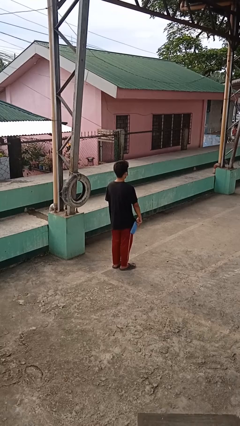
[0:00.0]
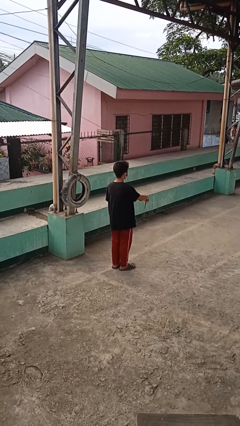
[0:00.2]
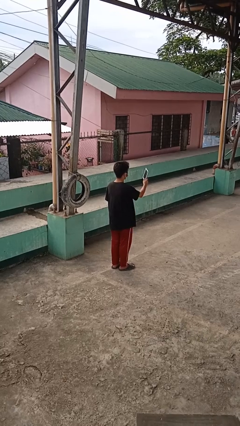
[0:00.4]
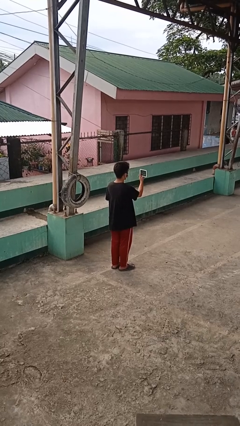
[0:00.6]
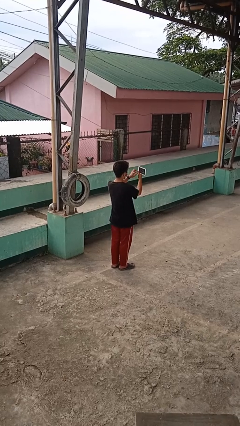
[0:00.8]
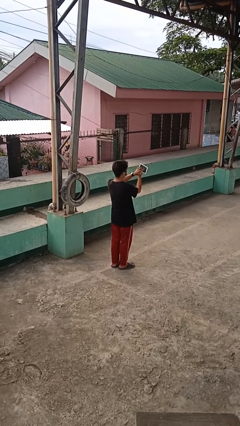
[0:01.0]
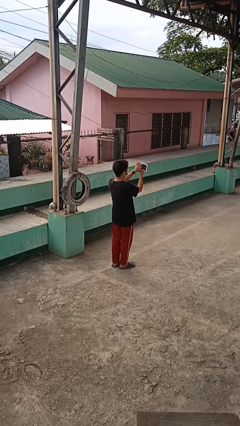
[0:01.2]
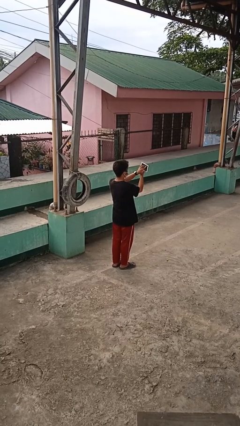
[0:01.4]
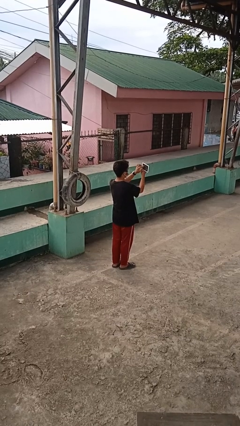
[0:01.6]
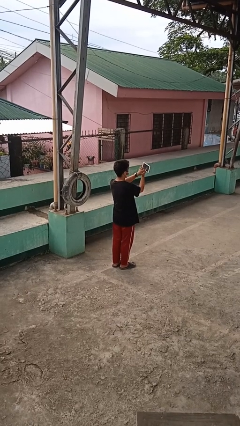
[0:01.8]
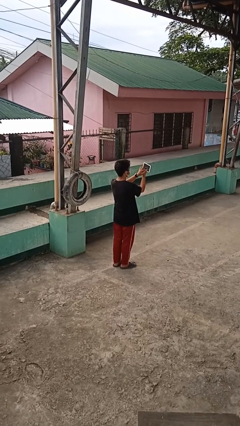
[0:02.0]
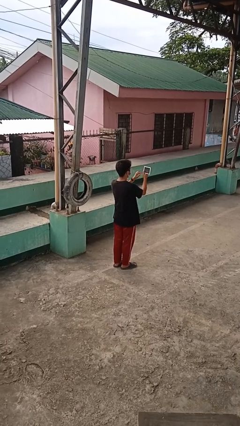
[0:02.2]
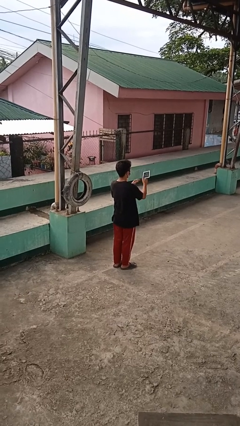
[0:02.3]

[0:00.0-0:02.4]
person interacts with tablet

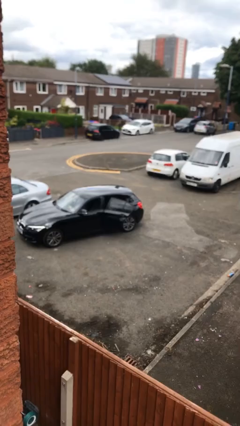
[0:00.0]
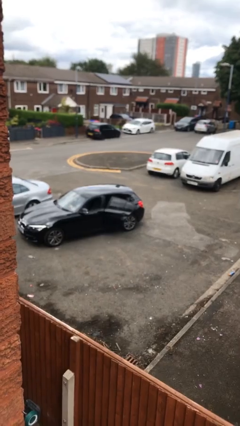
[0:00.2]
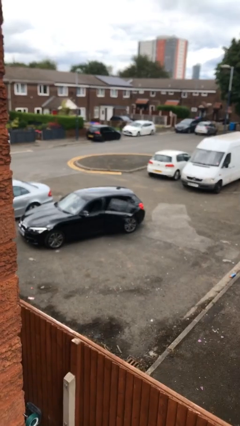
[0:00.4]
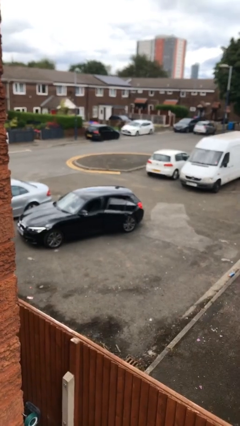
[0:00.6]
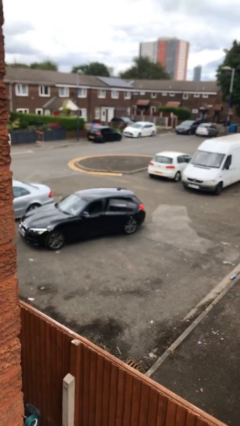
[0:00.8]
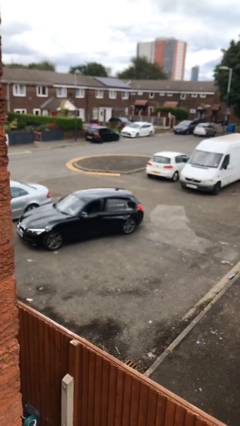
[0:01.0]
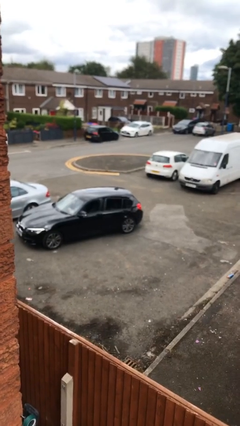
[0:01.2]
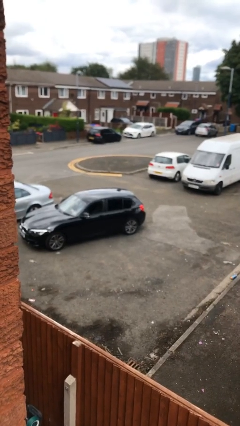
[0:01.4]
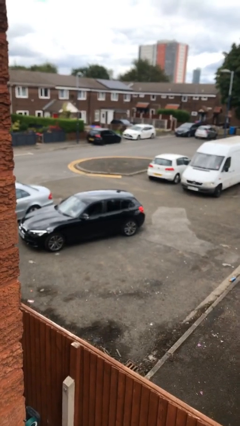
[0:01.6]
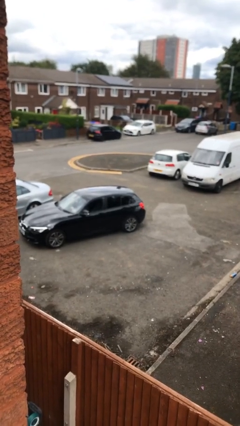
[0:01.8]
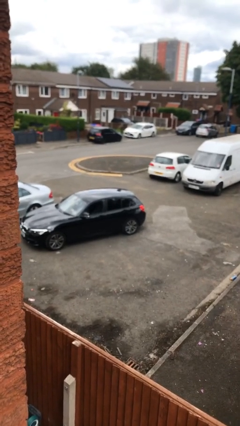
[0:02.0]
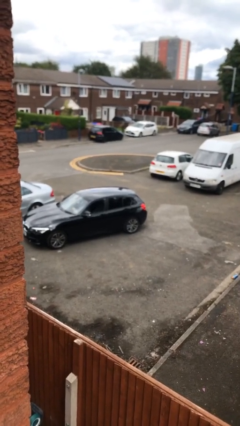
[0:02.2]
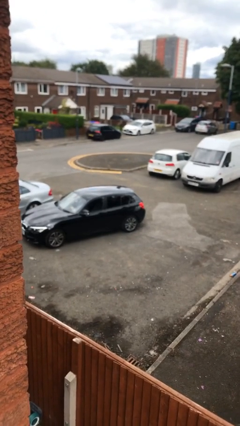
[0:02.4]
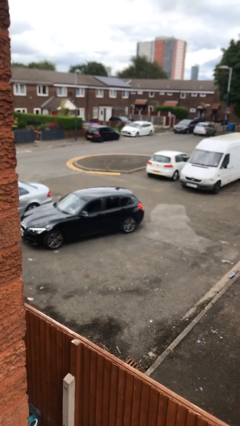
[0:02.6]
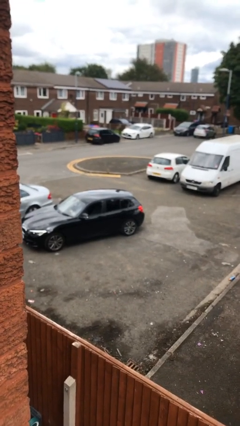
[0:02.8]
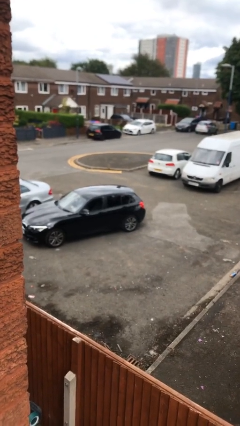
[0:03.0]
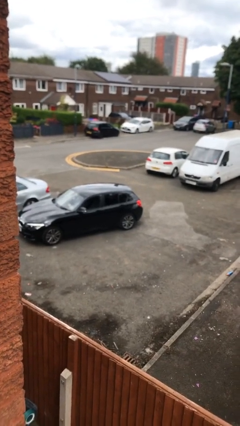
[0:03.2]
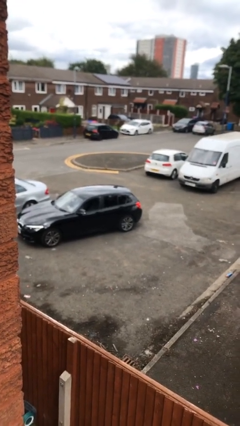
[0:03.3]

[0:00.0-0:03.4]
person closes car door

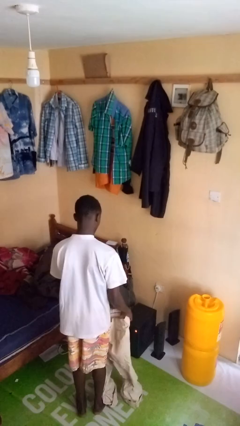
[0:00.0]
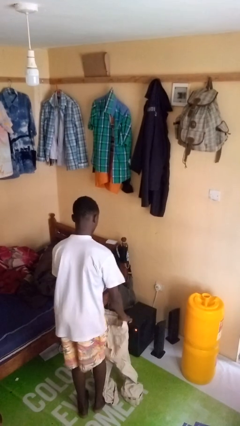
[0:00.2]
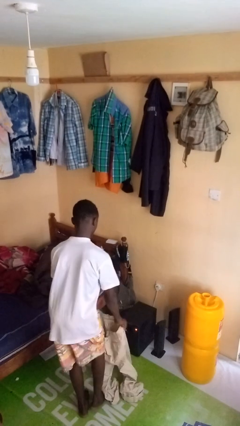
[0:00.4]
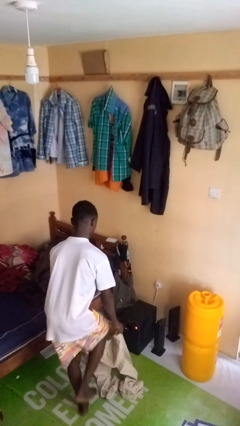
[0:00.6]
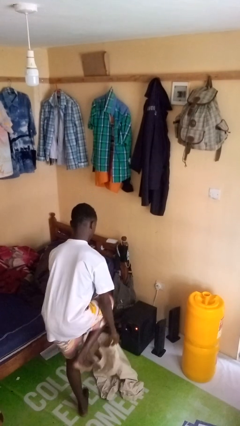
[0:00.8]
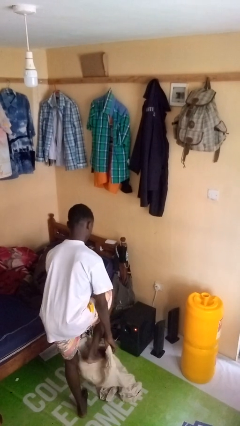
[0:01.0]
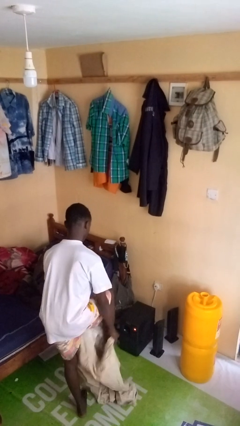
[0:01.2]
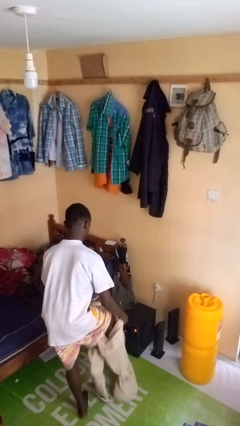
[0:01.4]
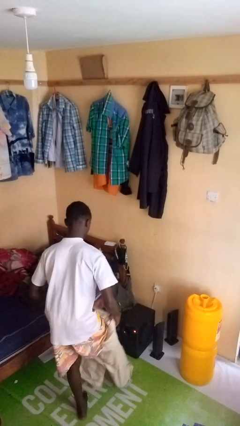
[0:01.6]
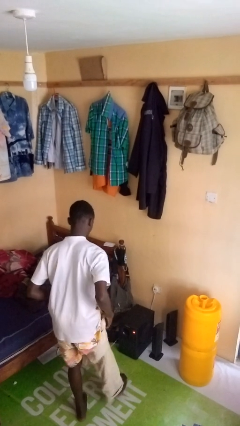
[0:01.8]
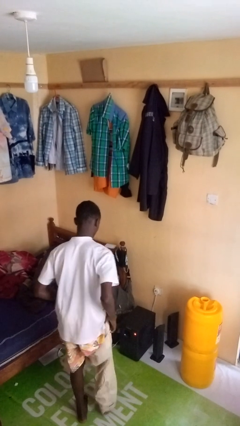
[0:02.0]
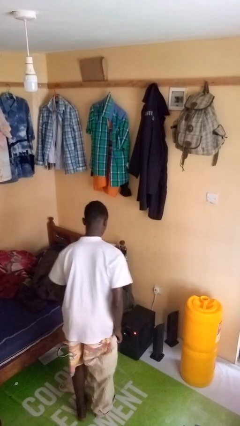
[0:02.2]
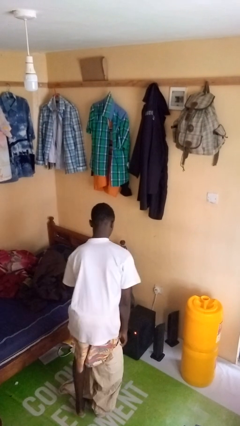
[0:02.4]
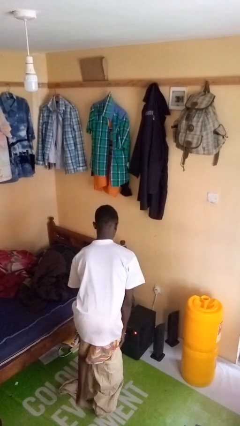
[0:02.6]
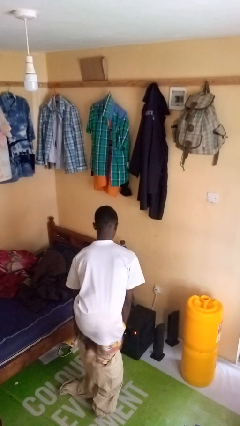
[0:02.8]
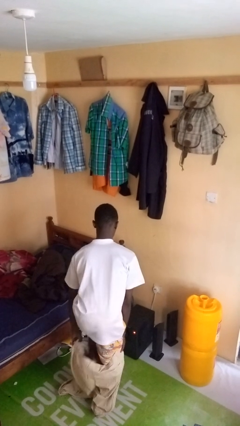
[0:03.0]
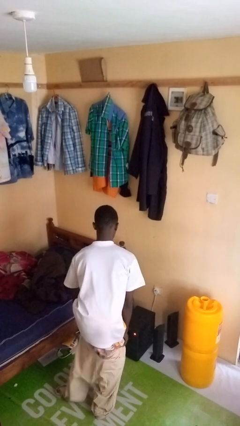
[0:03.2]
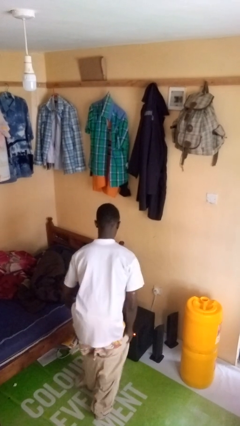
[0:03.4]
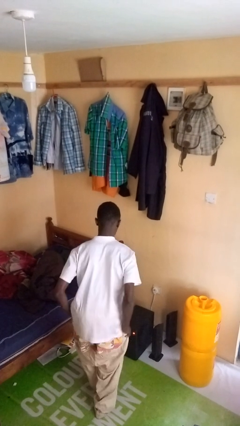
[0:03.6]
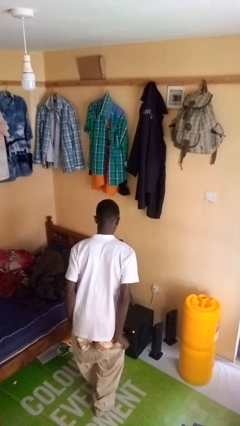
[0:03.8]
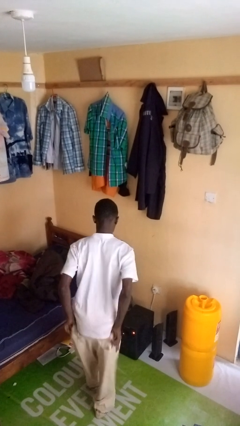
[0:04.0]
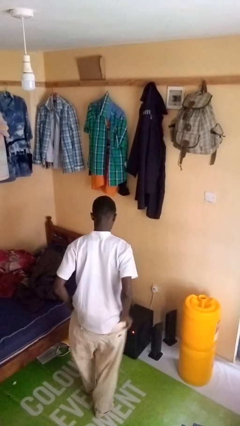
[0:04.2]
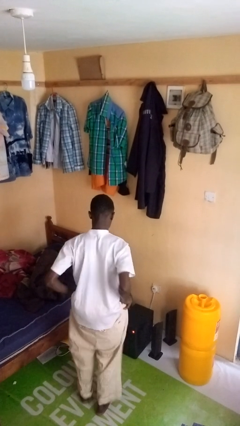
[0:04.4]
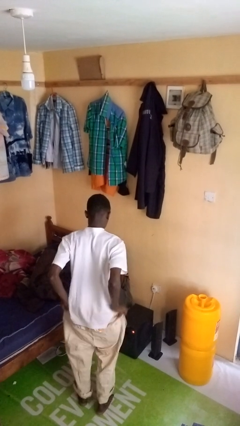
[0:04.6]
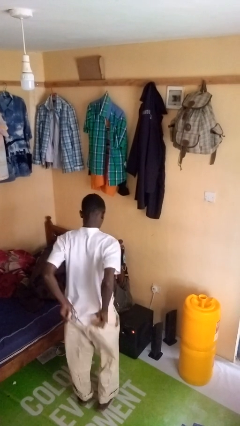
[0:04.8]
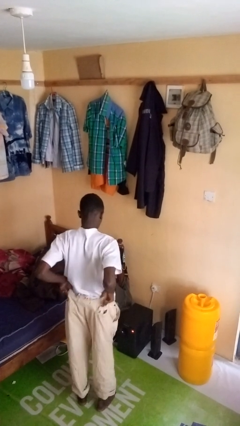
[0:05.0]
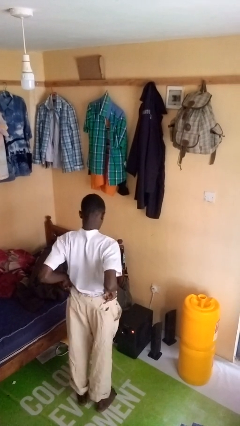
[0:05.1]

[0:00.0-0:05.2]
person puts on pants

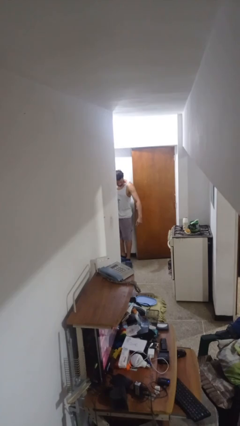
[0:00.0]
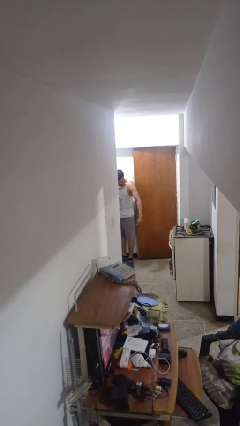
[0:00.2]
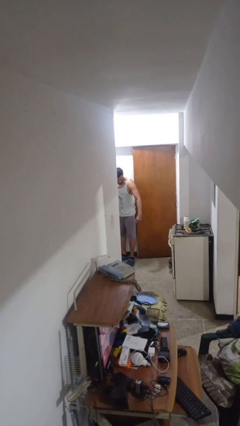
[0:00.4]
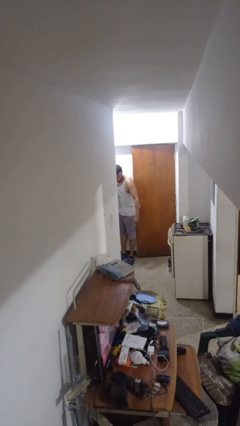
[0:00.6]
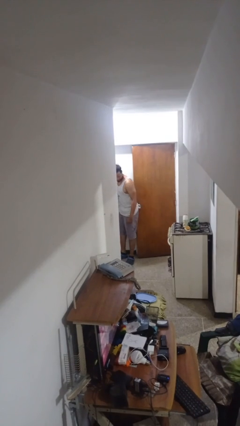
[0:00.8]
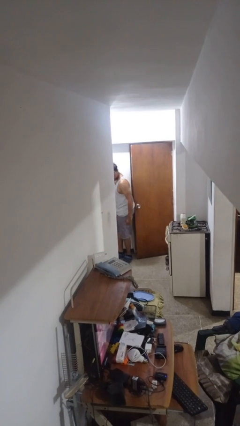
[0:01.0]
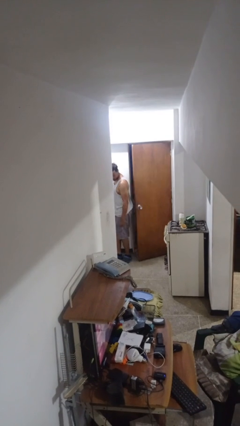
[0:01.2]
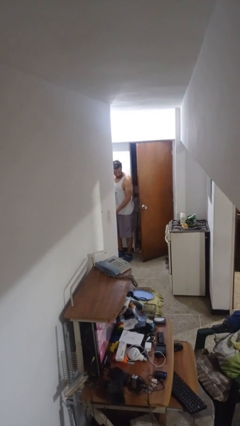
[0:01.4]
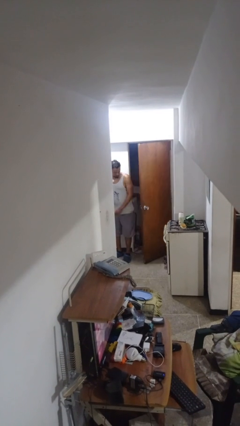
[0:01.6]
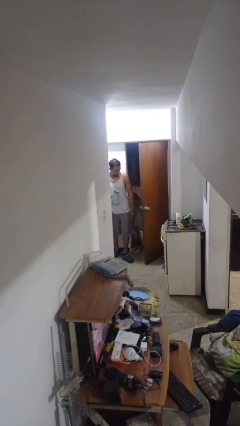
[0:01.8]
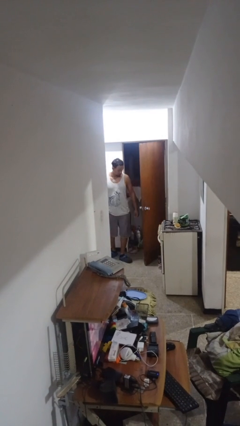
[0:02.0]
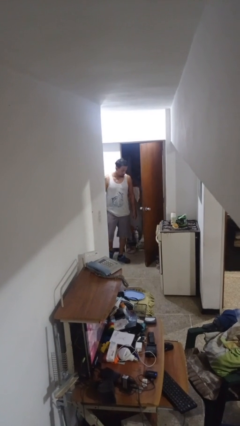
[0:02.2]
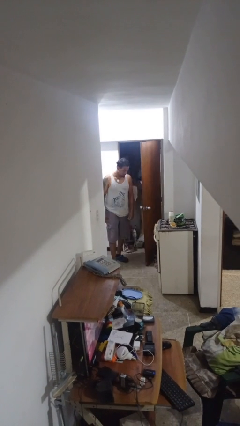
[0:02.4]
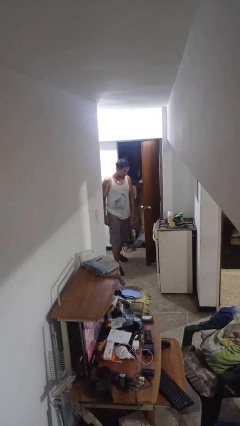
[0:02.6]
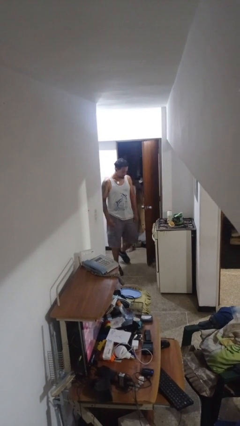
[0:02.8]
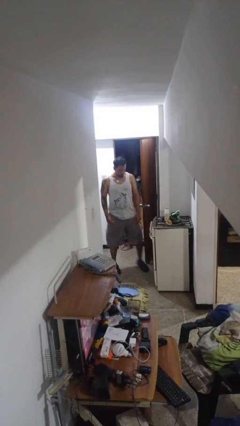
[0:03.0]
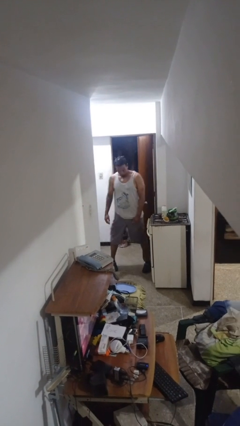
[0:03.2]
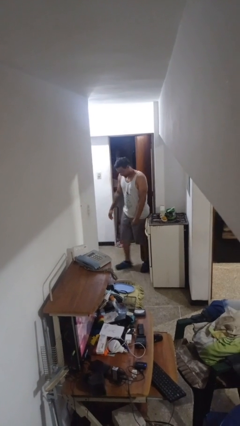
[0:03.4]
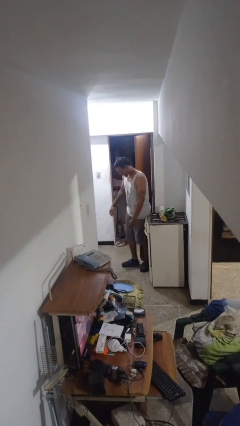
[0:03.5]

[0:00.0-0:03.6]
person opens facility door

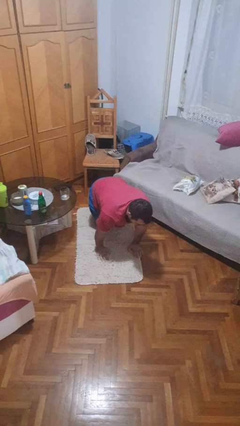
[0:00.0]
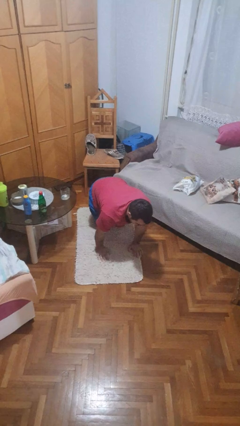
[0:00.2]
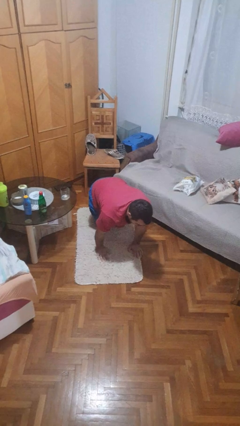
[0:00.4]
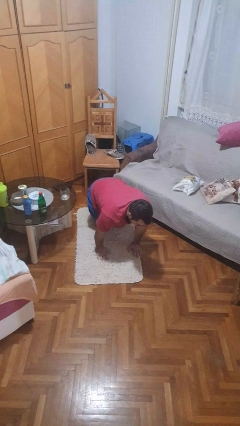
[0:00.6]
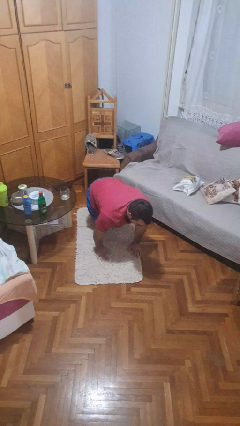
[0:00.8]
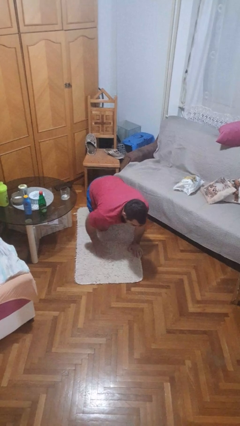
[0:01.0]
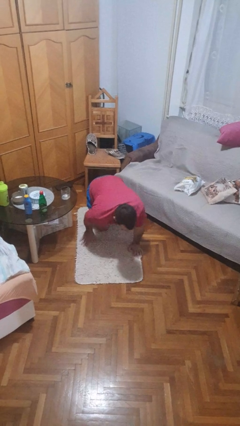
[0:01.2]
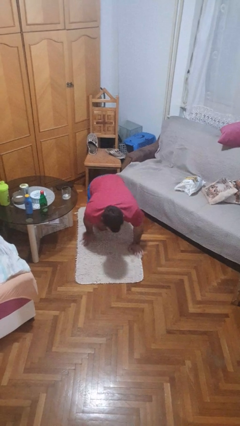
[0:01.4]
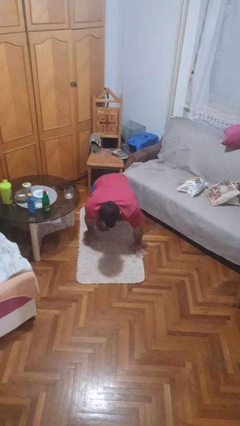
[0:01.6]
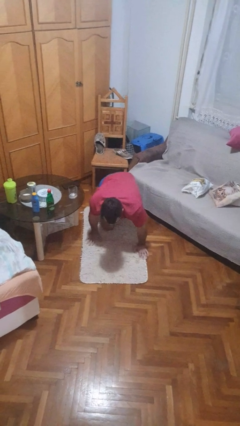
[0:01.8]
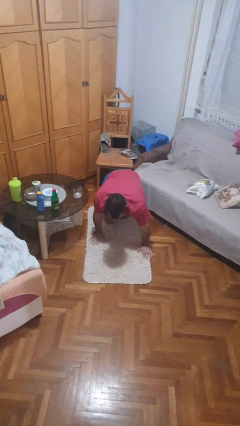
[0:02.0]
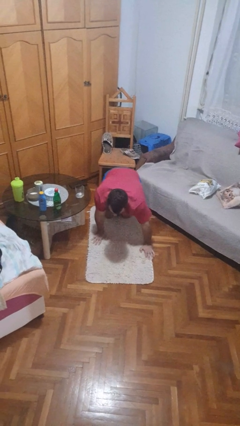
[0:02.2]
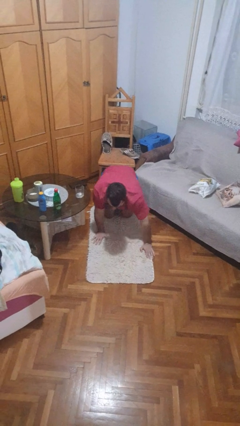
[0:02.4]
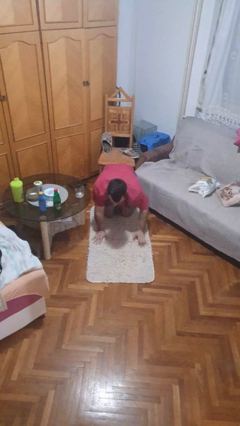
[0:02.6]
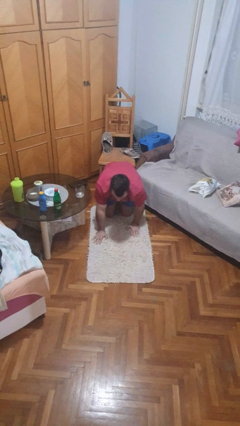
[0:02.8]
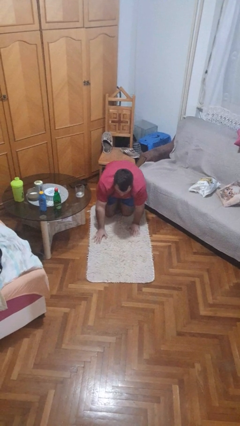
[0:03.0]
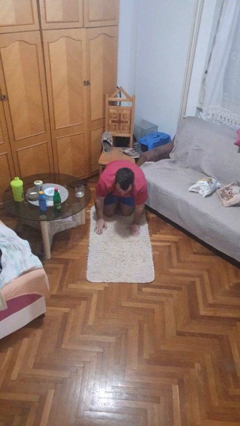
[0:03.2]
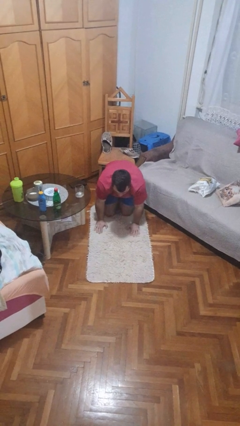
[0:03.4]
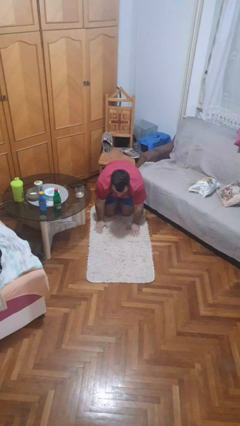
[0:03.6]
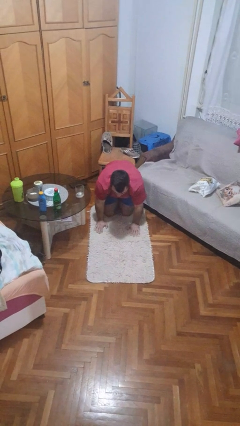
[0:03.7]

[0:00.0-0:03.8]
person crawls
